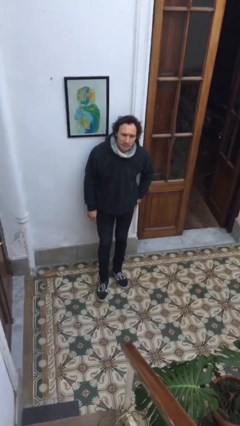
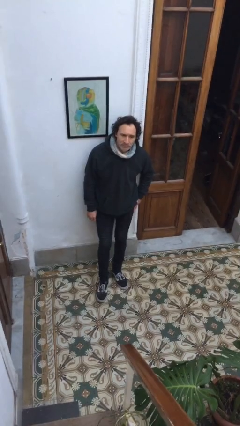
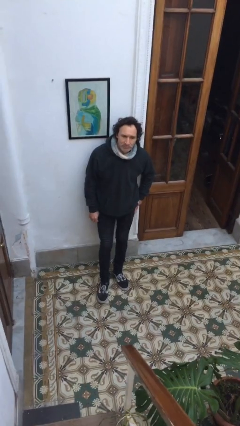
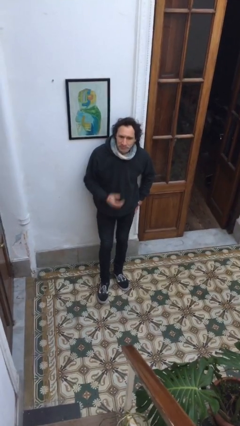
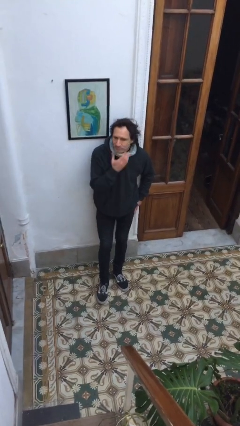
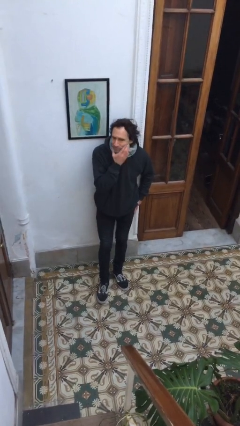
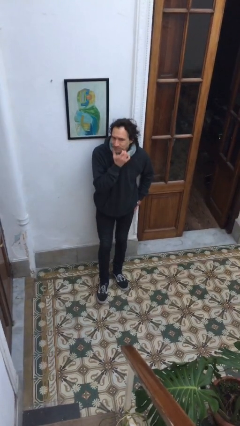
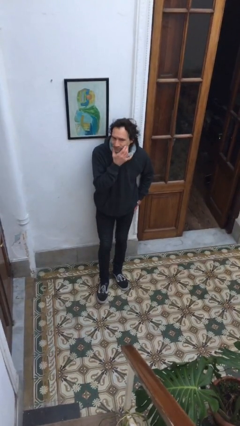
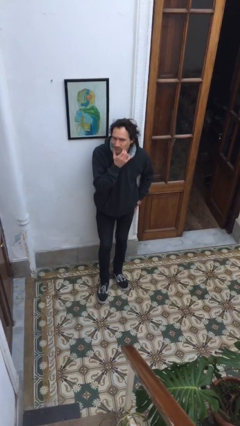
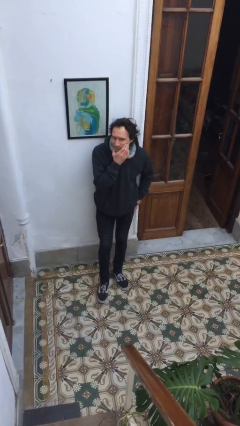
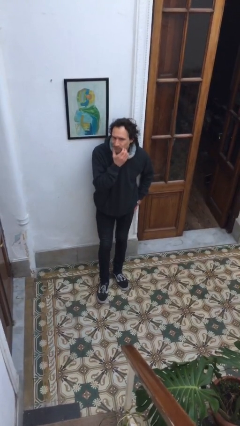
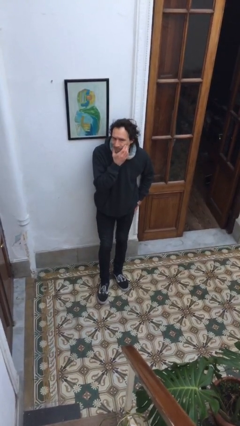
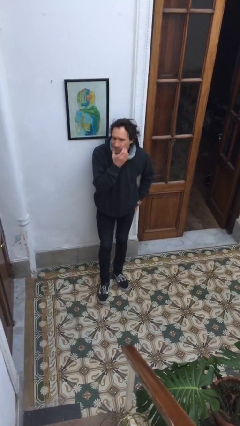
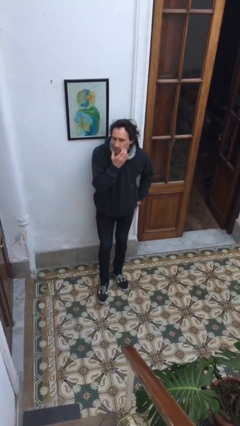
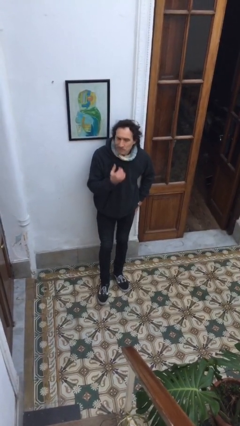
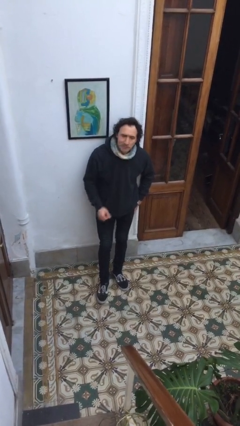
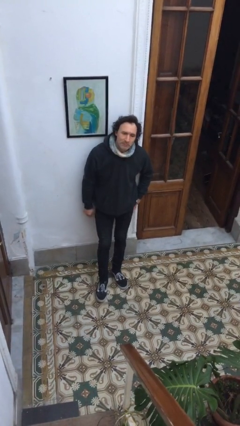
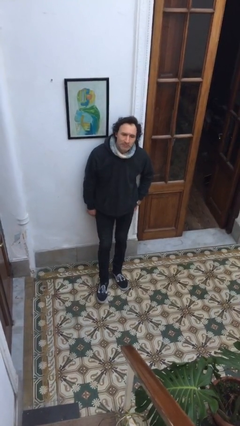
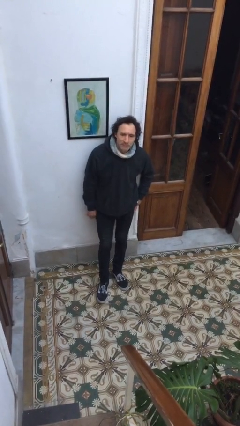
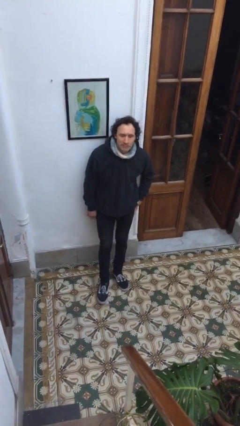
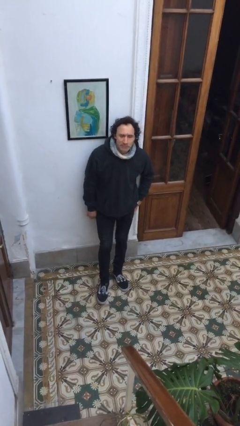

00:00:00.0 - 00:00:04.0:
person scratches face

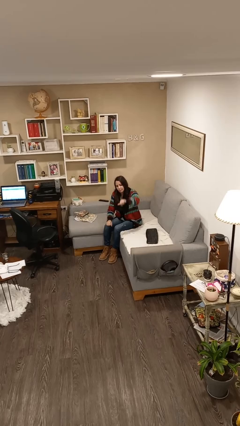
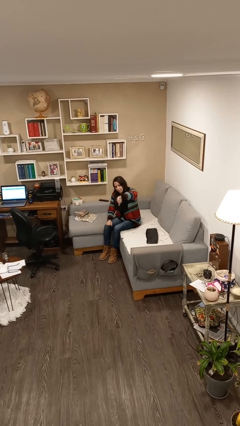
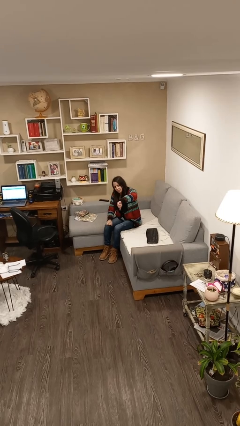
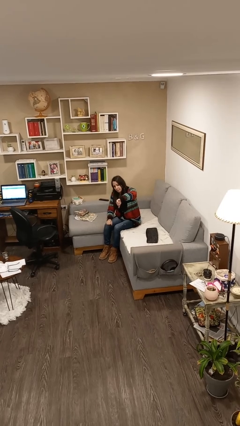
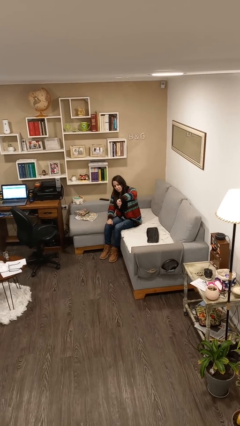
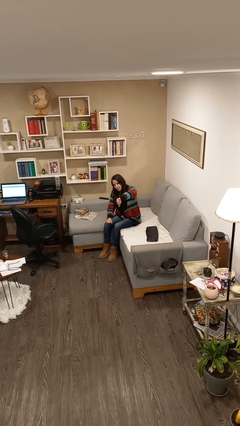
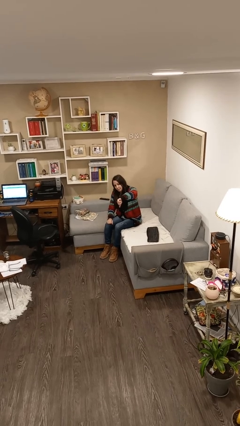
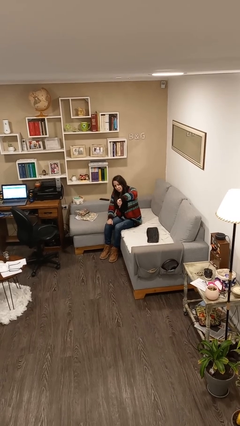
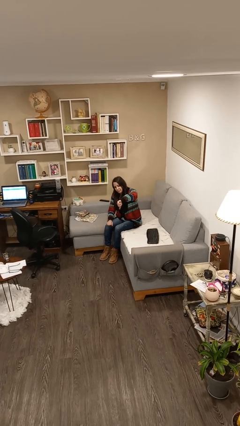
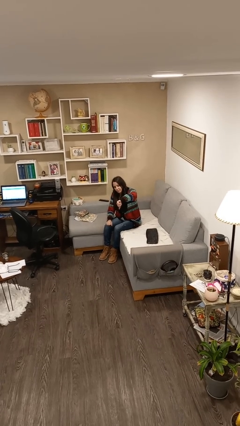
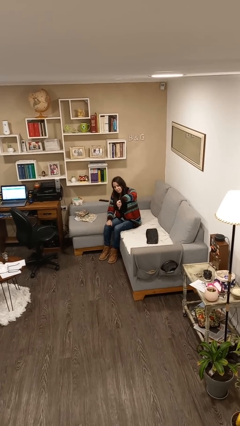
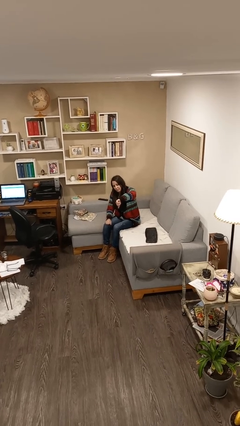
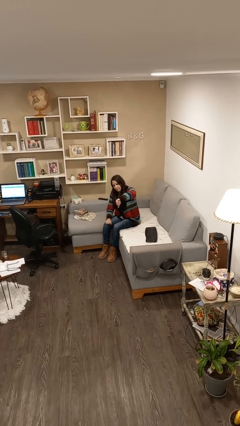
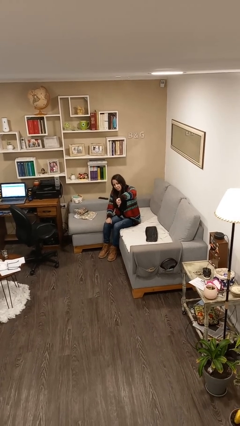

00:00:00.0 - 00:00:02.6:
person gestures thumbs down

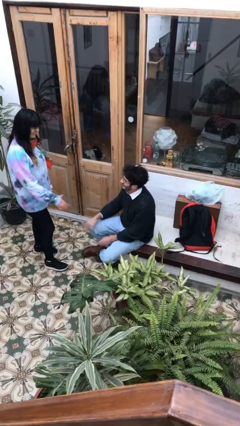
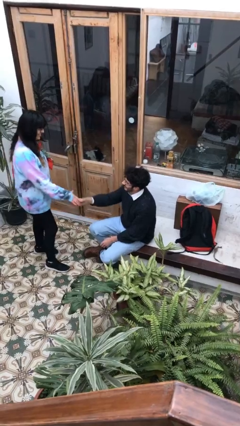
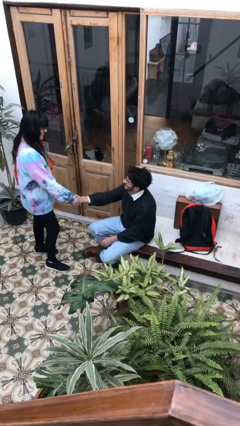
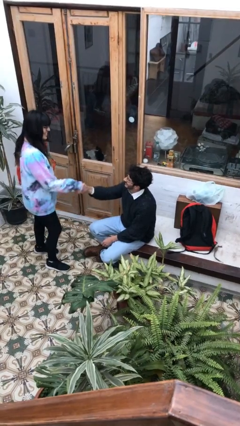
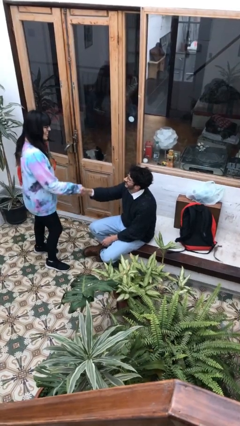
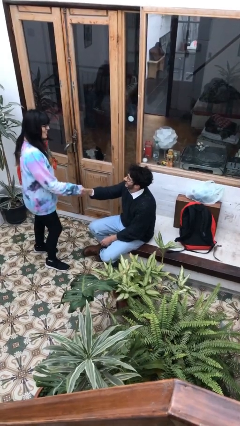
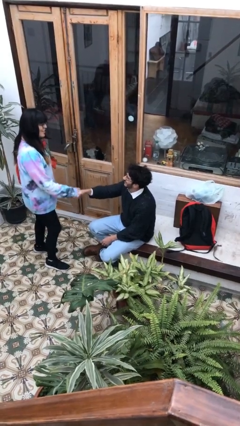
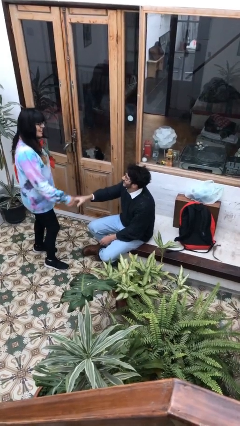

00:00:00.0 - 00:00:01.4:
person shakes hand

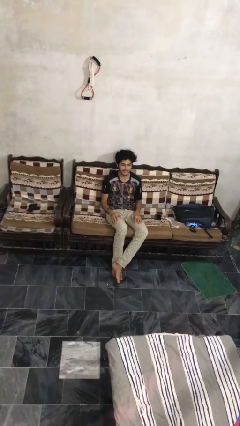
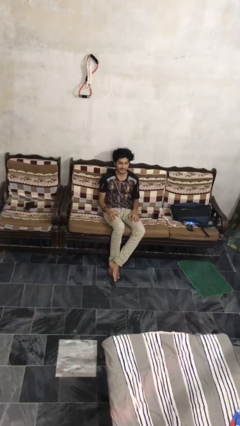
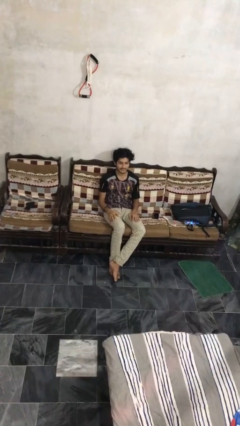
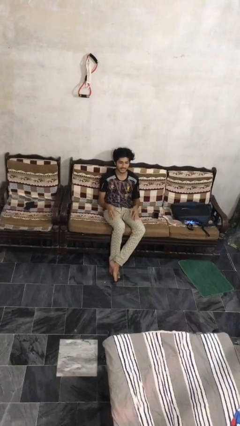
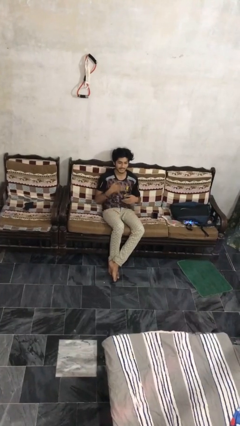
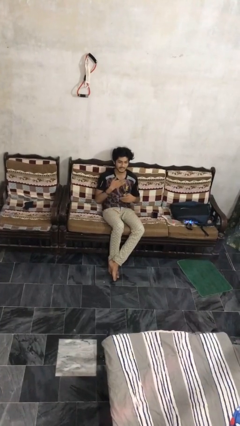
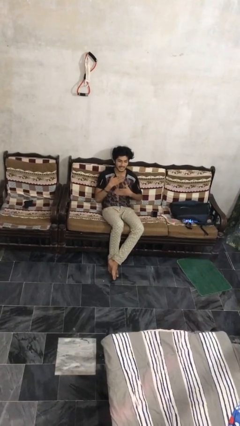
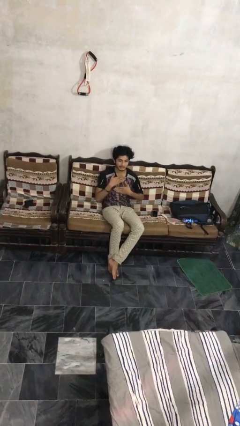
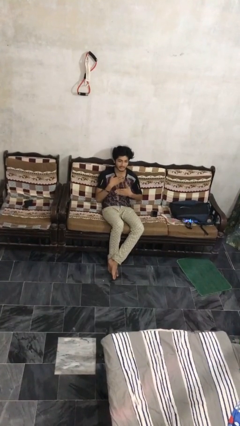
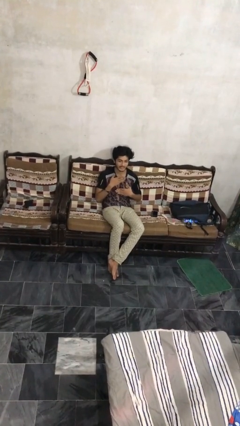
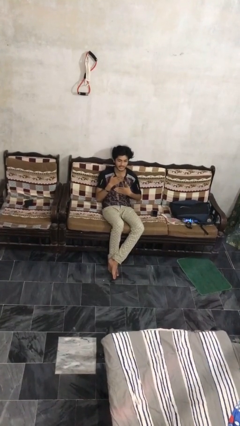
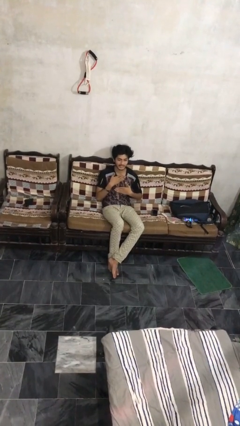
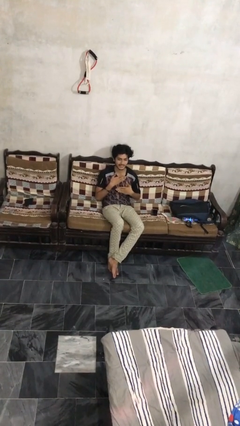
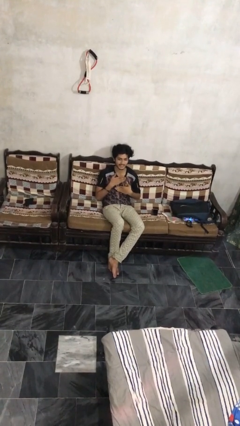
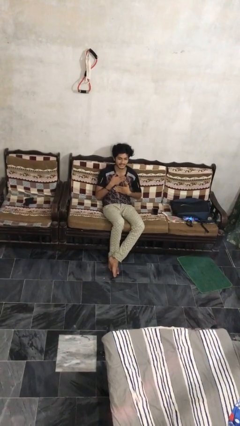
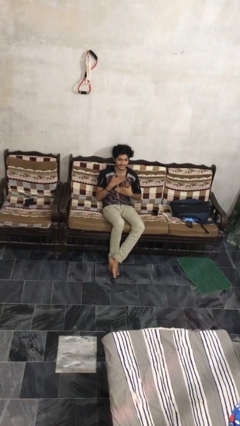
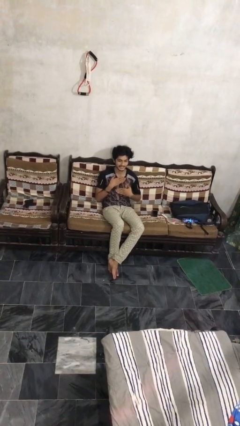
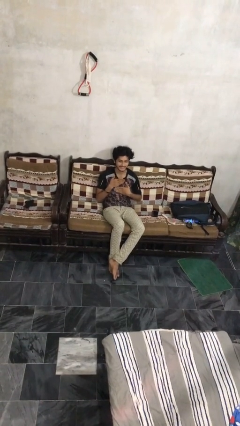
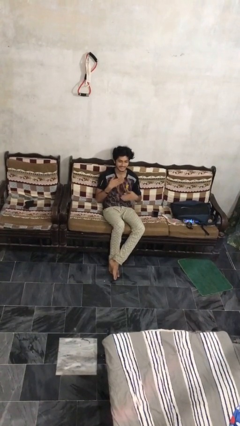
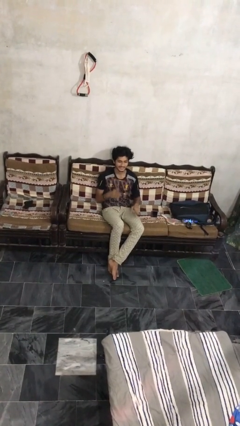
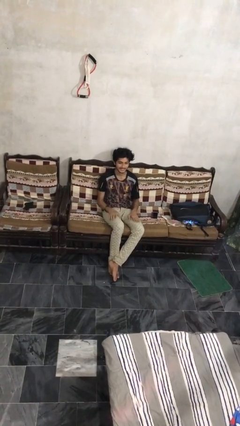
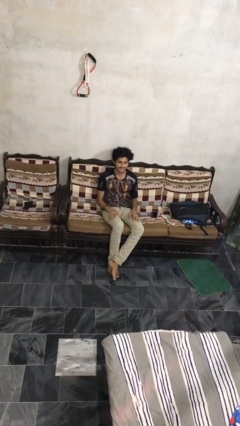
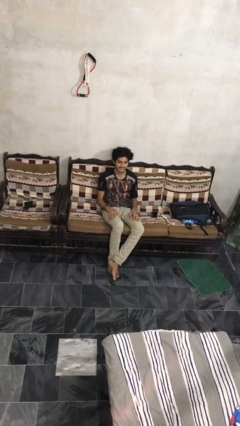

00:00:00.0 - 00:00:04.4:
person drums on chest

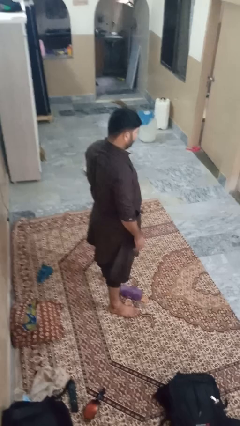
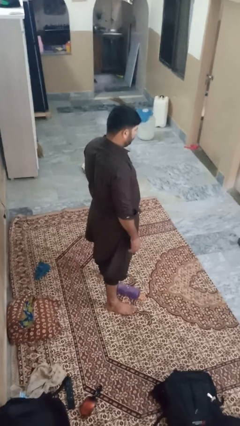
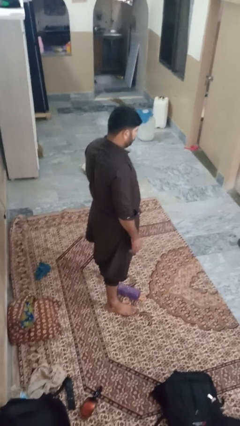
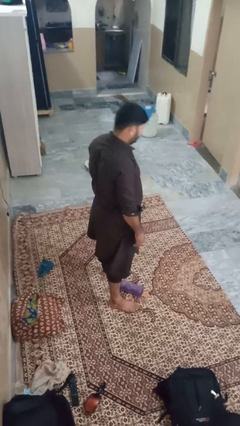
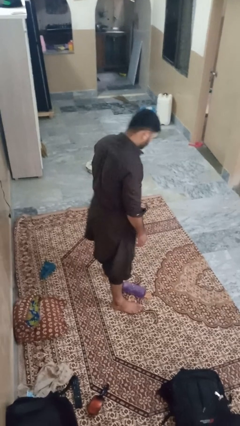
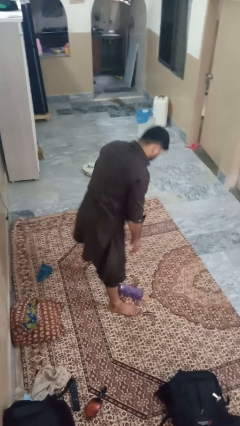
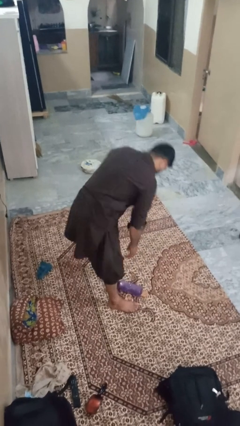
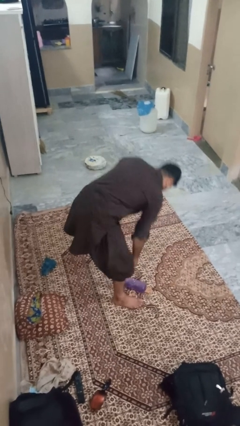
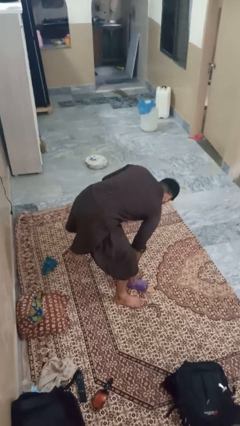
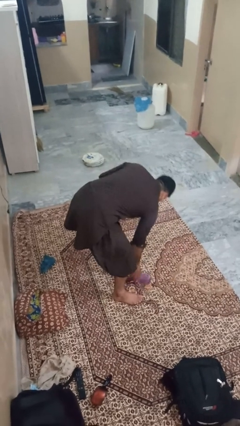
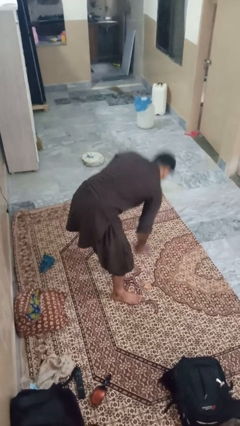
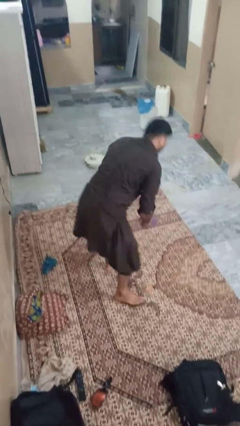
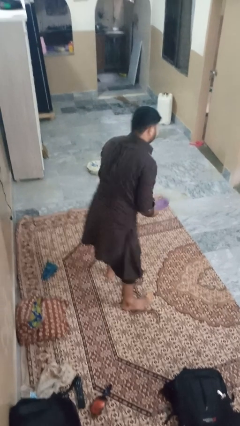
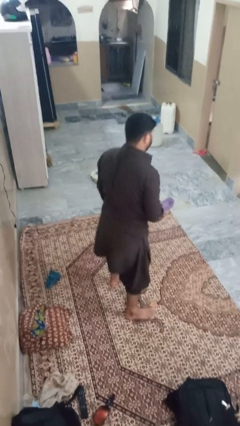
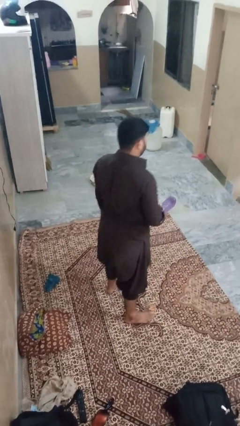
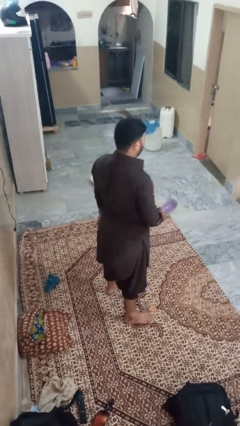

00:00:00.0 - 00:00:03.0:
person picks up object from floor

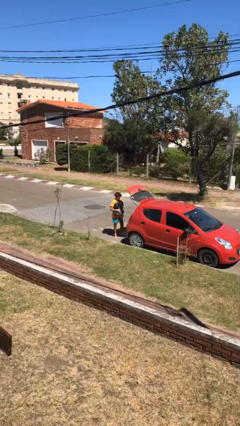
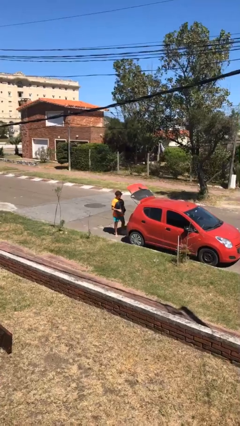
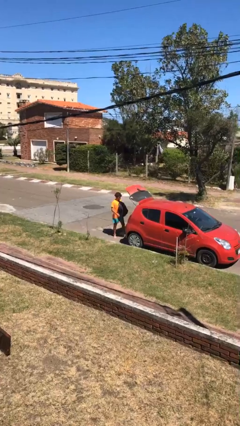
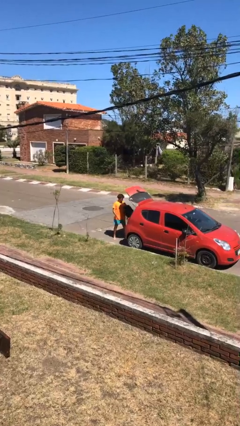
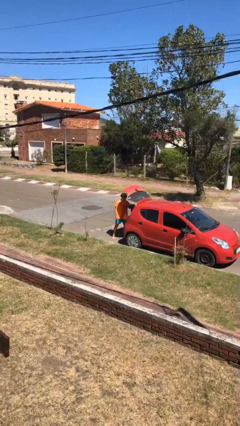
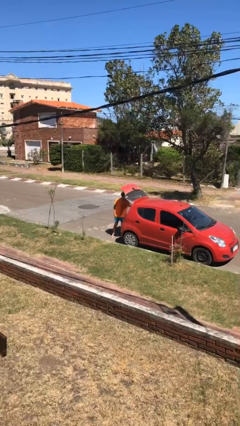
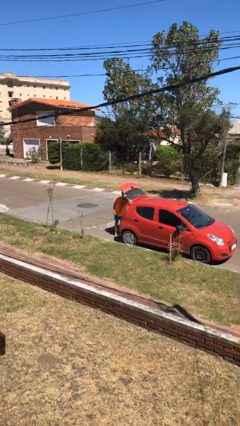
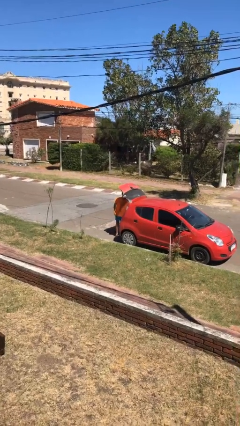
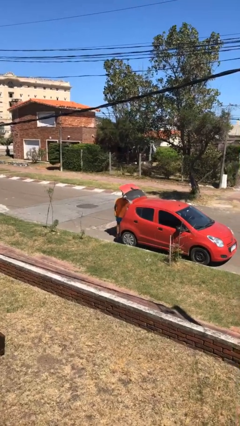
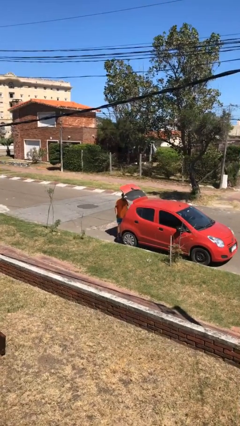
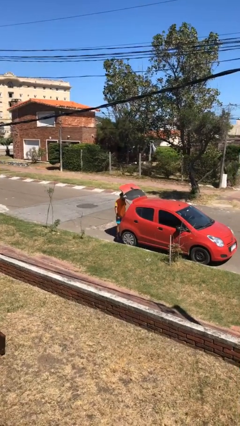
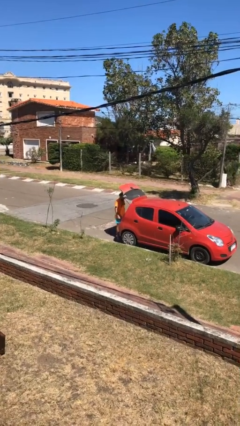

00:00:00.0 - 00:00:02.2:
person loads car
